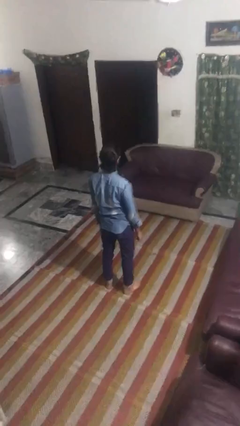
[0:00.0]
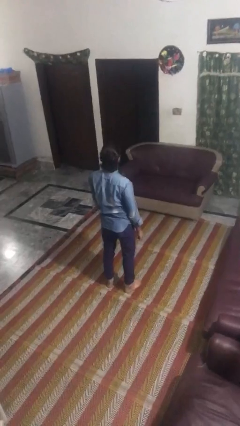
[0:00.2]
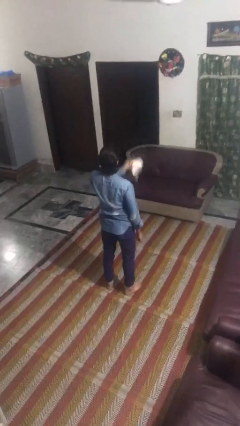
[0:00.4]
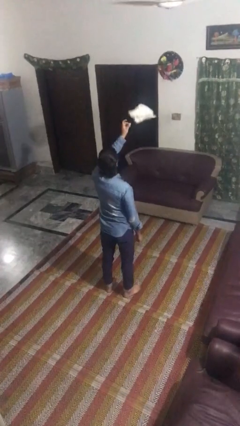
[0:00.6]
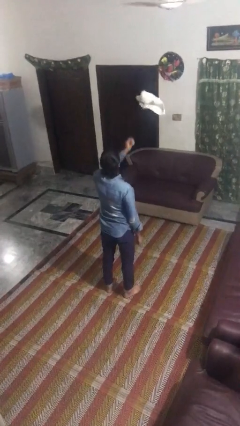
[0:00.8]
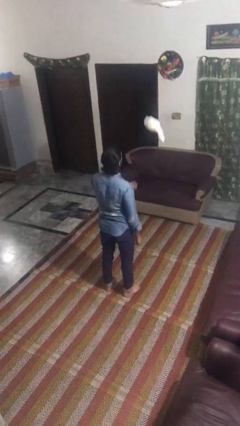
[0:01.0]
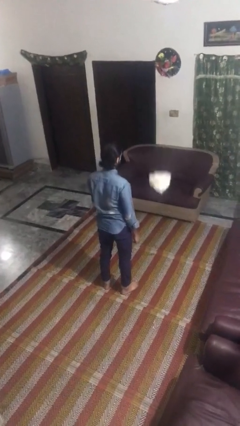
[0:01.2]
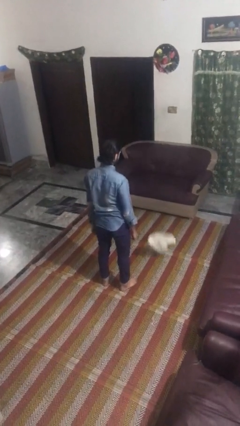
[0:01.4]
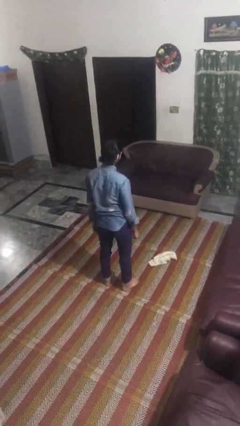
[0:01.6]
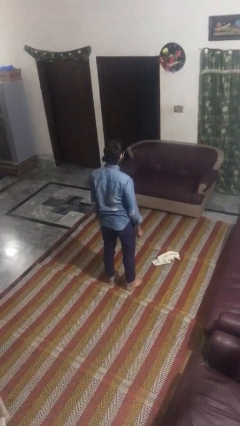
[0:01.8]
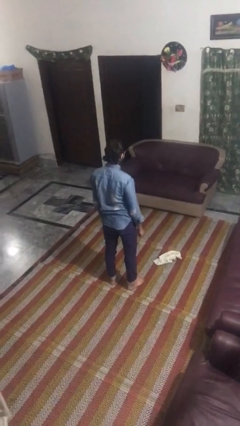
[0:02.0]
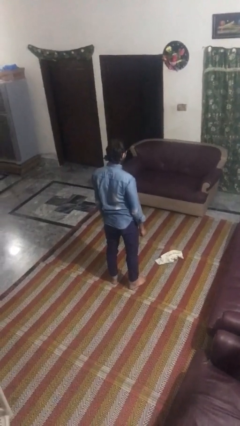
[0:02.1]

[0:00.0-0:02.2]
person throws object into air

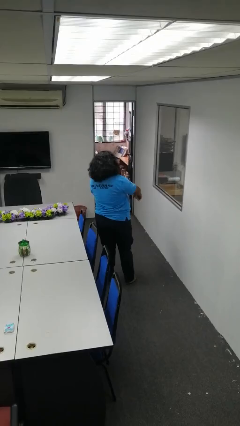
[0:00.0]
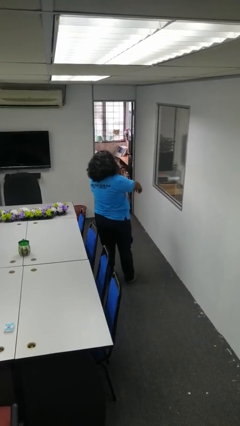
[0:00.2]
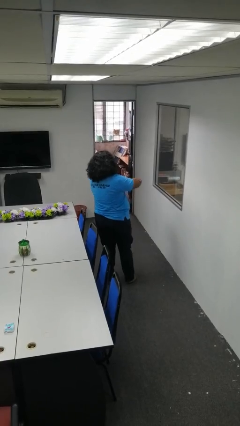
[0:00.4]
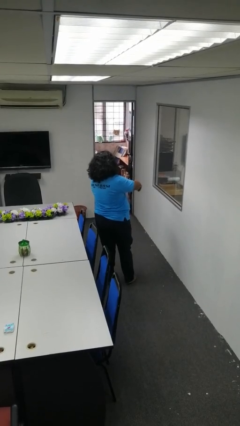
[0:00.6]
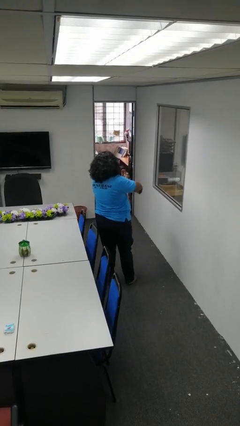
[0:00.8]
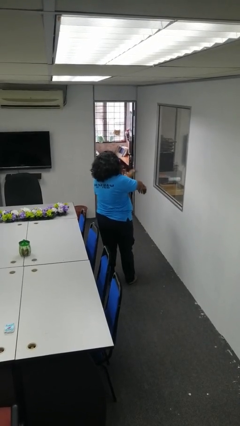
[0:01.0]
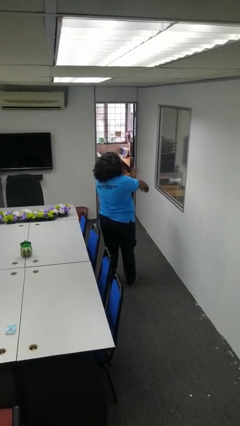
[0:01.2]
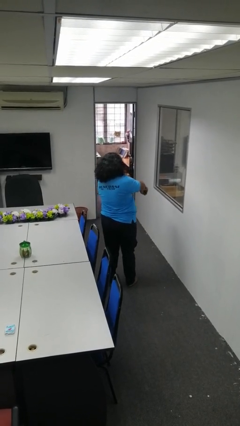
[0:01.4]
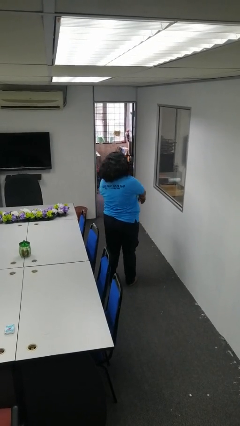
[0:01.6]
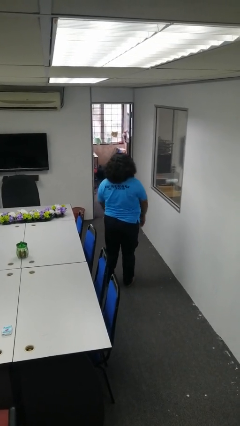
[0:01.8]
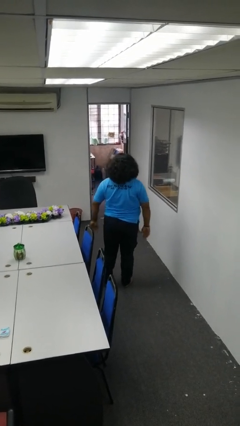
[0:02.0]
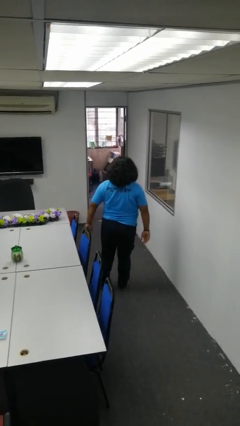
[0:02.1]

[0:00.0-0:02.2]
person swats bug

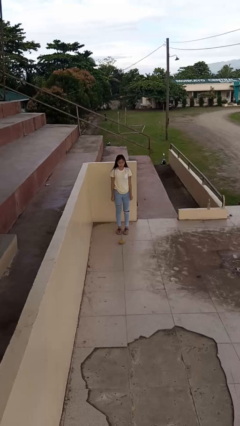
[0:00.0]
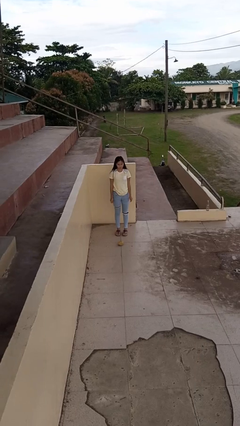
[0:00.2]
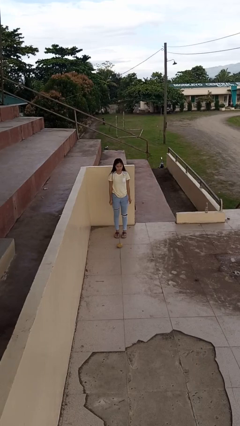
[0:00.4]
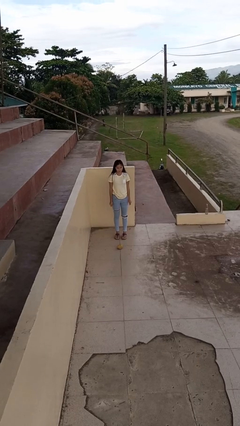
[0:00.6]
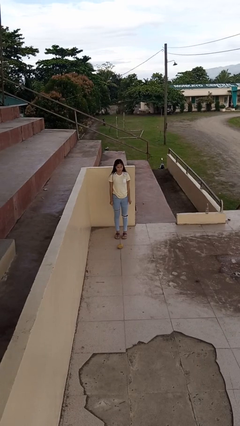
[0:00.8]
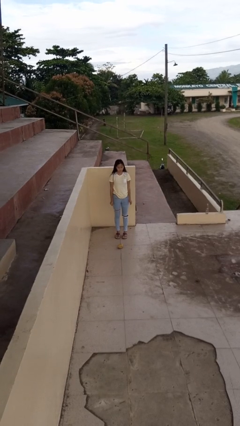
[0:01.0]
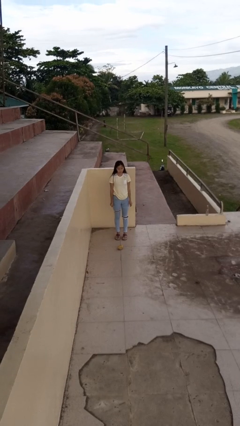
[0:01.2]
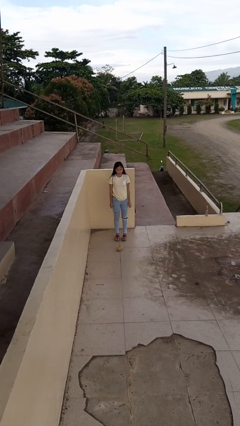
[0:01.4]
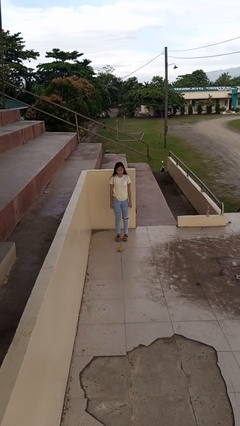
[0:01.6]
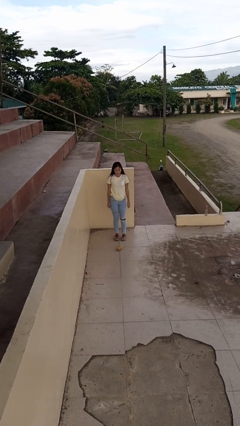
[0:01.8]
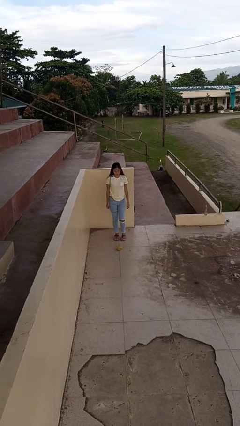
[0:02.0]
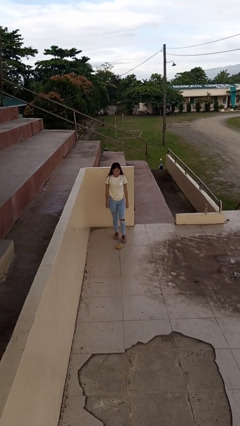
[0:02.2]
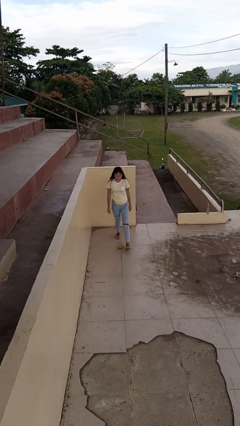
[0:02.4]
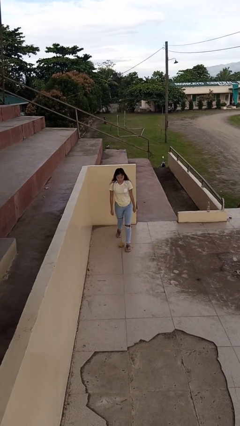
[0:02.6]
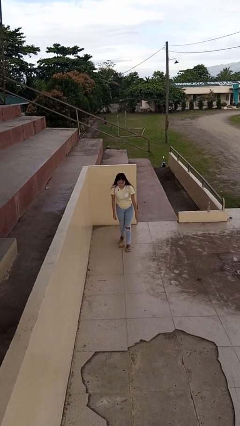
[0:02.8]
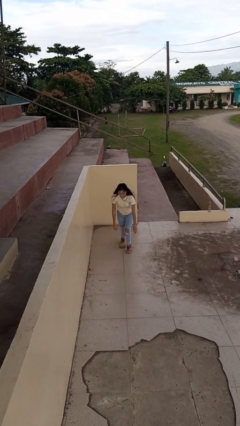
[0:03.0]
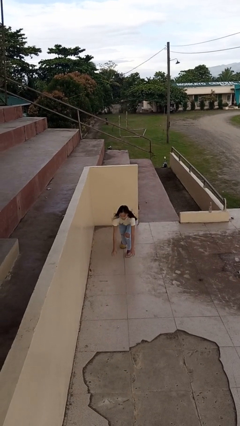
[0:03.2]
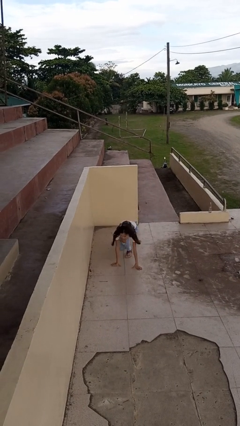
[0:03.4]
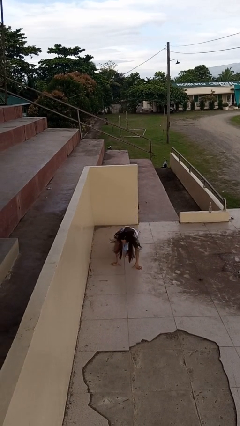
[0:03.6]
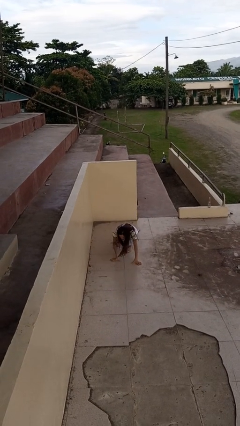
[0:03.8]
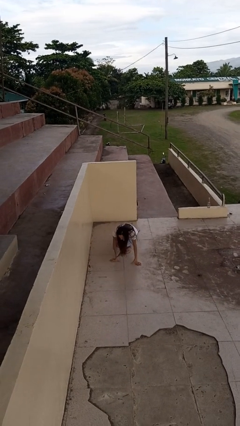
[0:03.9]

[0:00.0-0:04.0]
person trips on object on floor

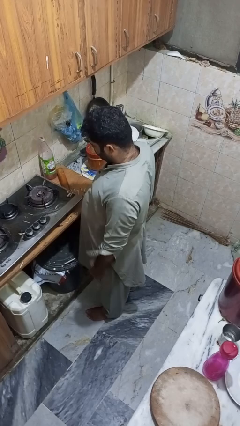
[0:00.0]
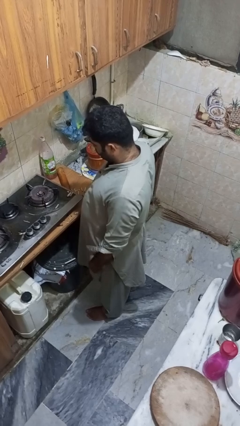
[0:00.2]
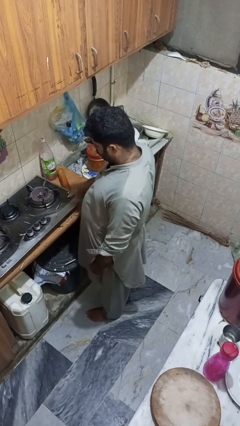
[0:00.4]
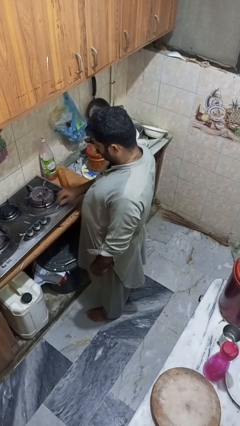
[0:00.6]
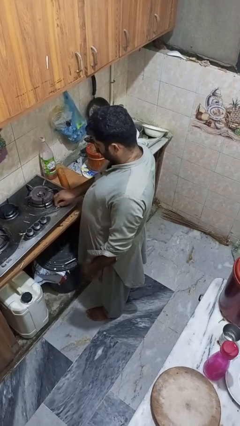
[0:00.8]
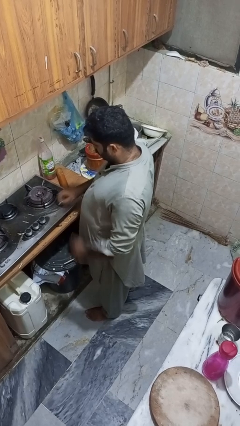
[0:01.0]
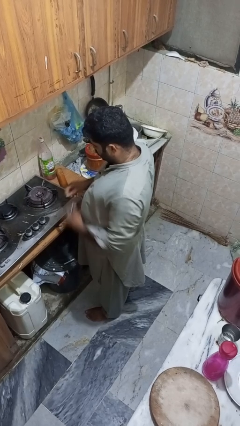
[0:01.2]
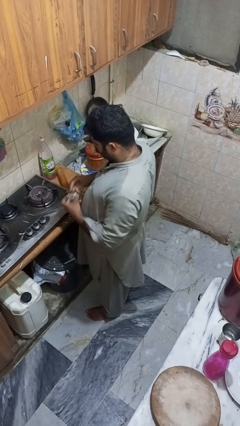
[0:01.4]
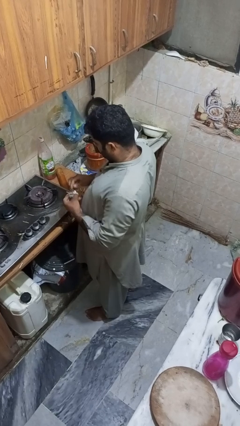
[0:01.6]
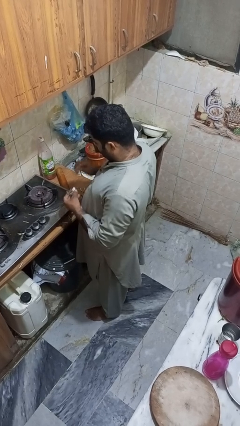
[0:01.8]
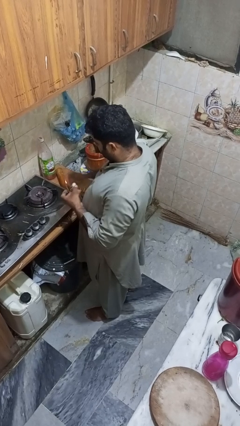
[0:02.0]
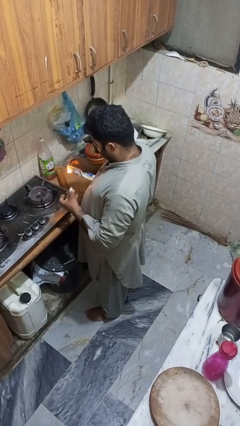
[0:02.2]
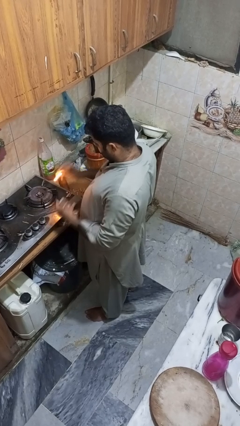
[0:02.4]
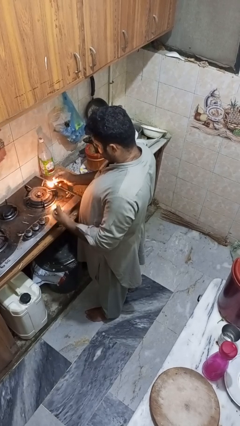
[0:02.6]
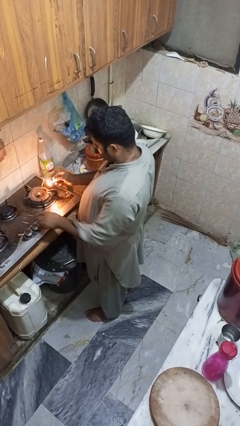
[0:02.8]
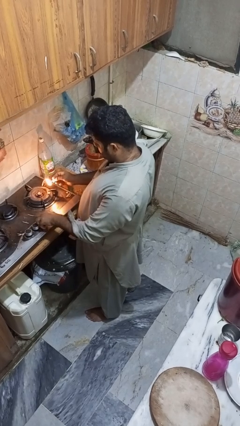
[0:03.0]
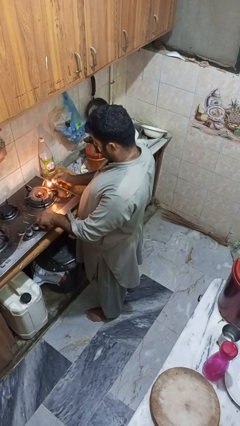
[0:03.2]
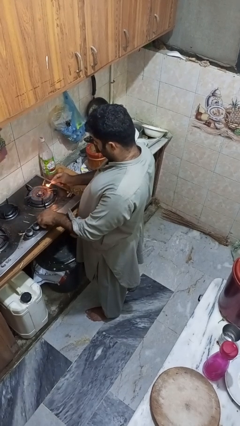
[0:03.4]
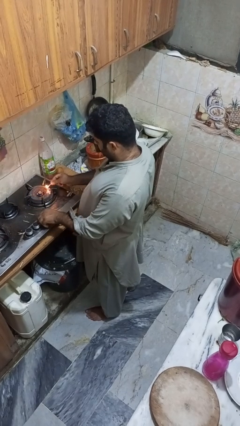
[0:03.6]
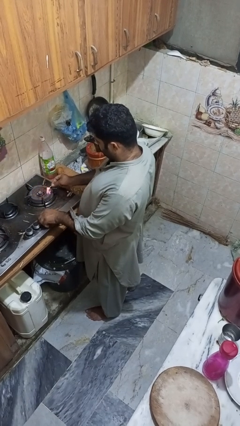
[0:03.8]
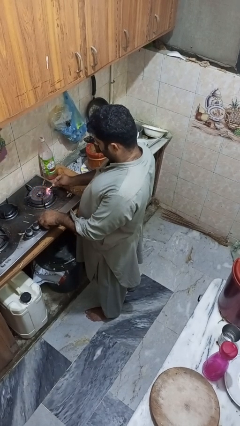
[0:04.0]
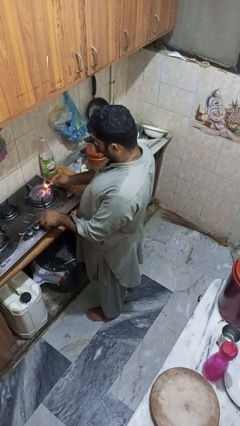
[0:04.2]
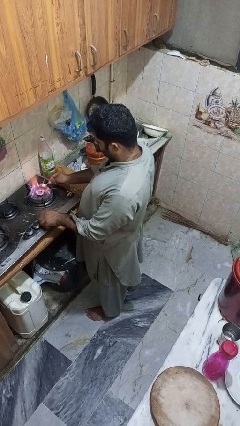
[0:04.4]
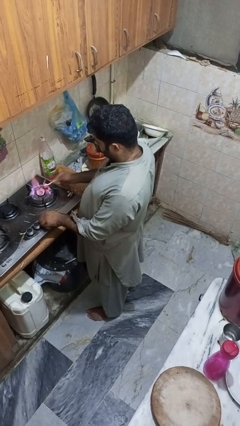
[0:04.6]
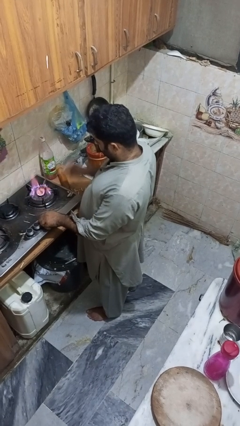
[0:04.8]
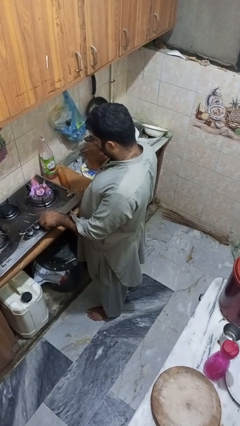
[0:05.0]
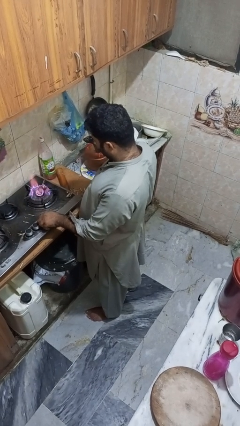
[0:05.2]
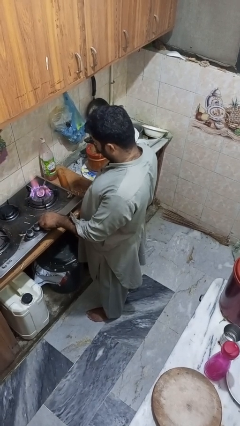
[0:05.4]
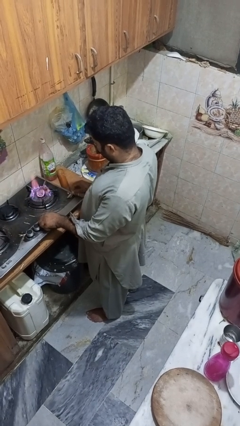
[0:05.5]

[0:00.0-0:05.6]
person turns on stovetop

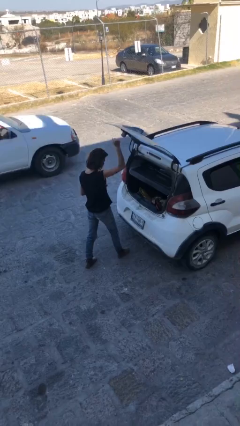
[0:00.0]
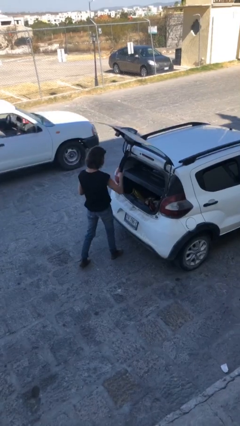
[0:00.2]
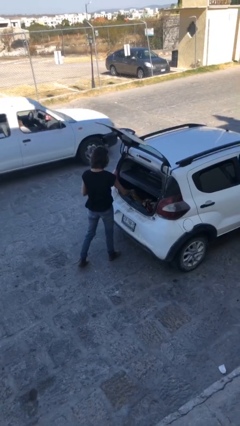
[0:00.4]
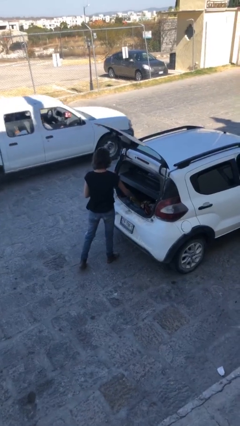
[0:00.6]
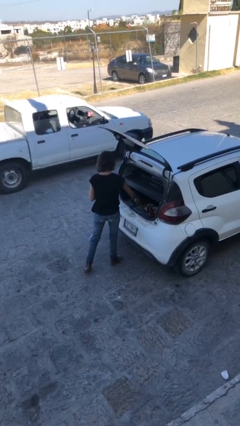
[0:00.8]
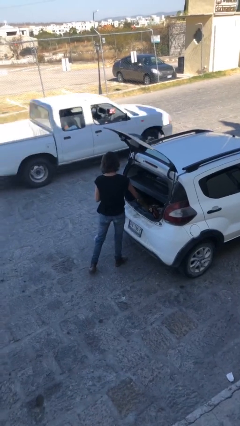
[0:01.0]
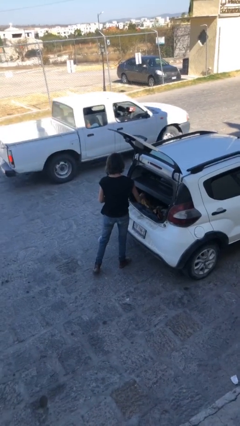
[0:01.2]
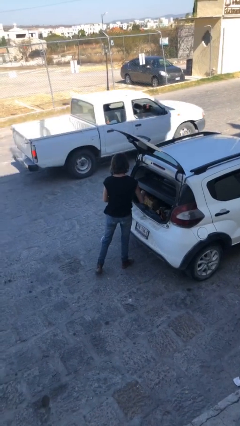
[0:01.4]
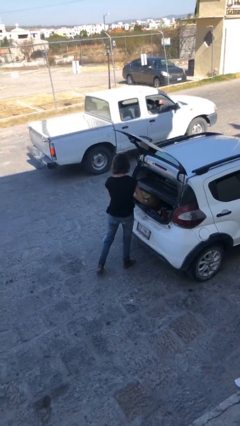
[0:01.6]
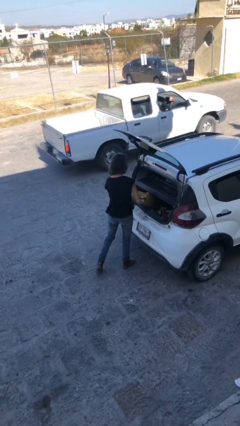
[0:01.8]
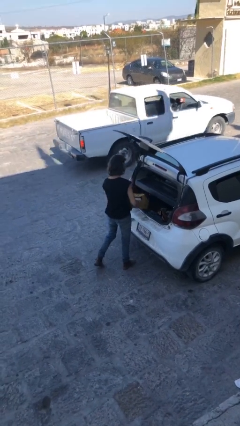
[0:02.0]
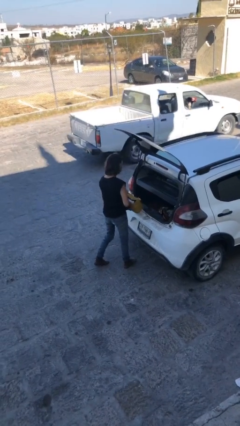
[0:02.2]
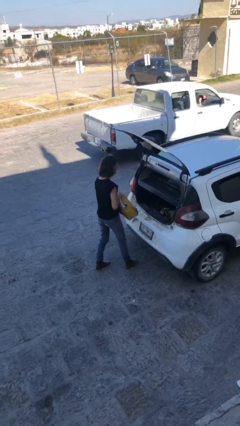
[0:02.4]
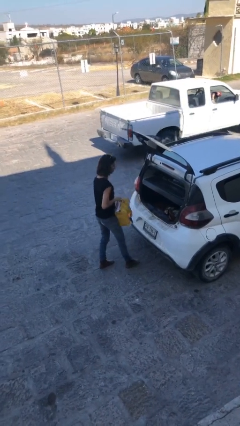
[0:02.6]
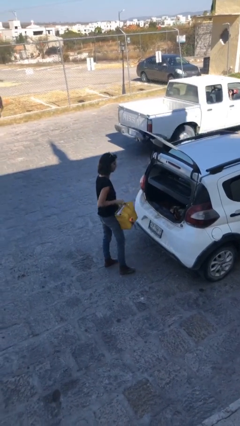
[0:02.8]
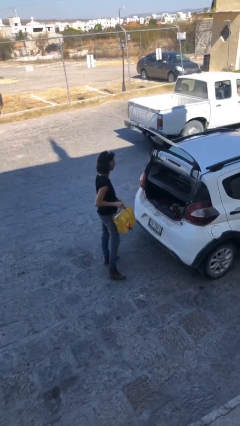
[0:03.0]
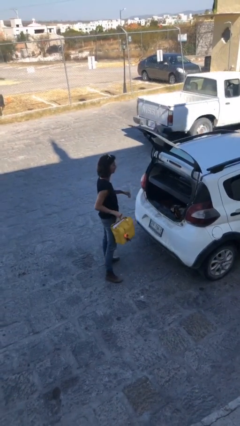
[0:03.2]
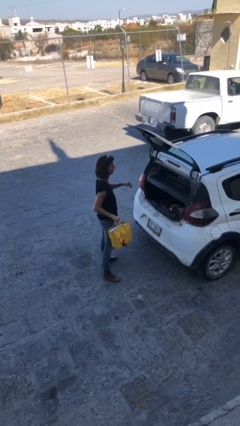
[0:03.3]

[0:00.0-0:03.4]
person unloads car
